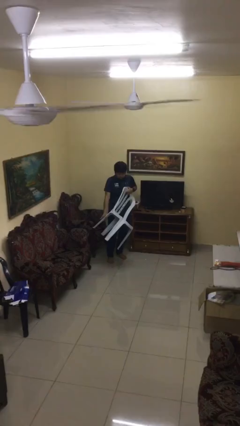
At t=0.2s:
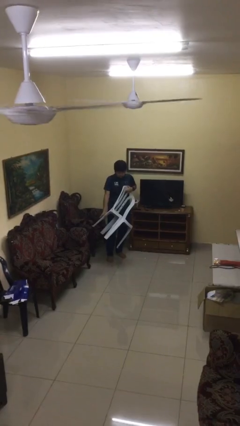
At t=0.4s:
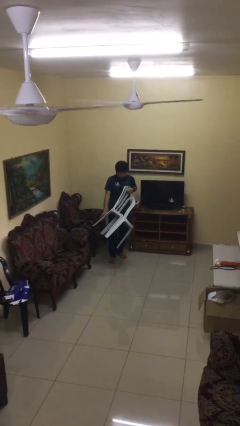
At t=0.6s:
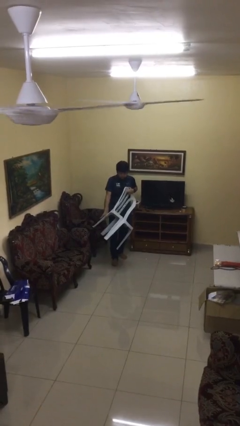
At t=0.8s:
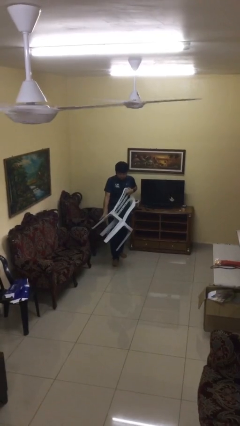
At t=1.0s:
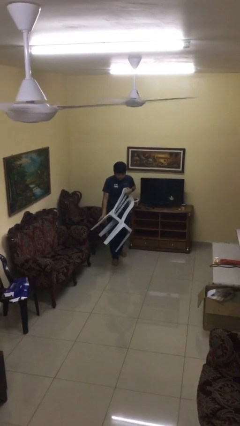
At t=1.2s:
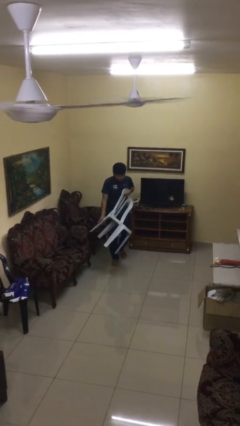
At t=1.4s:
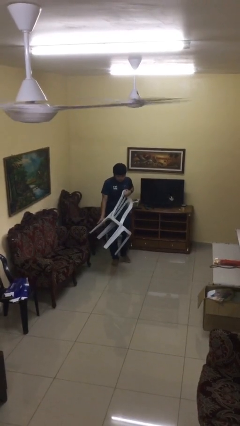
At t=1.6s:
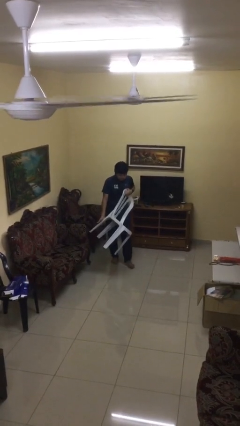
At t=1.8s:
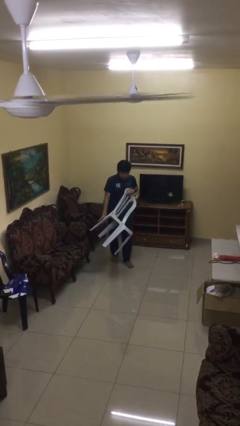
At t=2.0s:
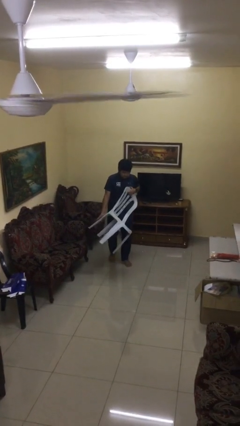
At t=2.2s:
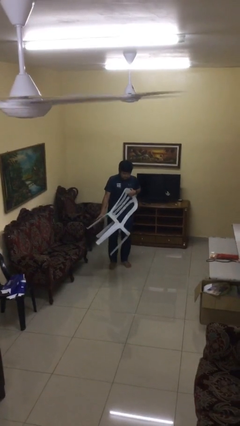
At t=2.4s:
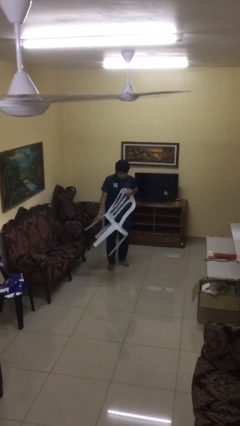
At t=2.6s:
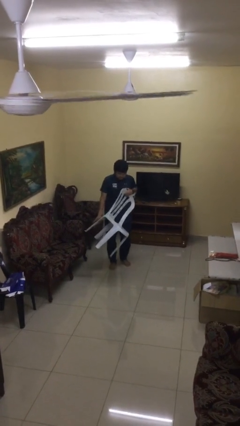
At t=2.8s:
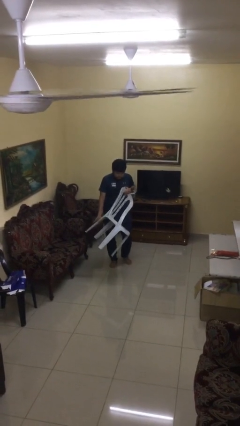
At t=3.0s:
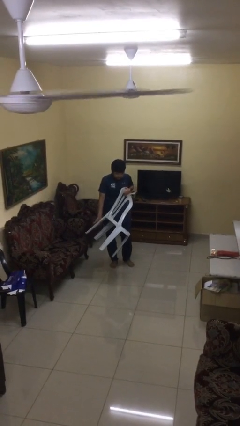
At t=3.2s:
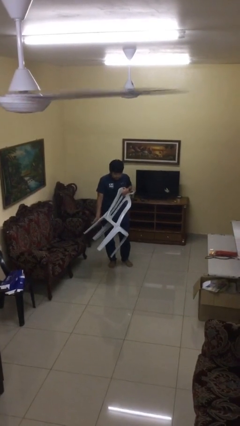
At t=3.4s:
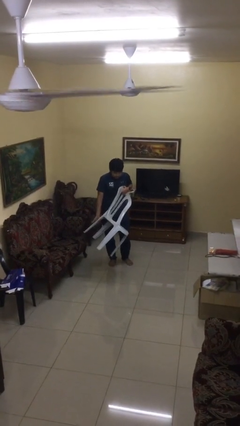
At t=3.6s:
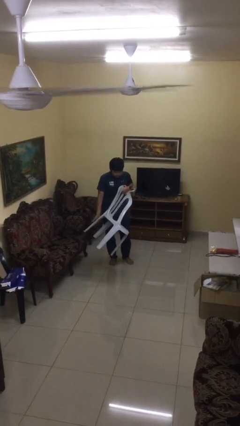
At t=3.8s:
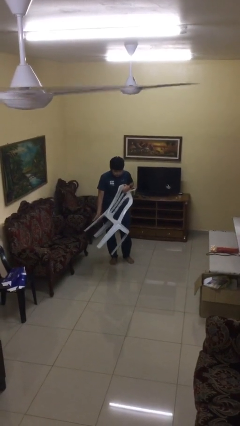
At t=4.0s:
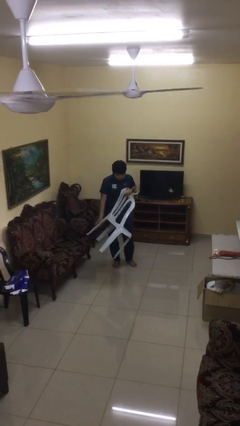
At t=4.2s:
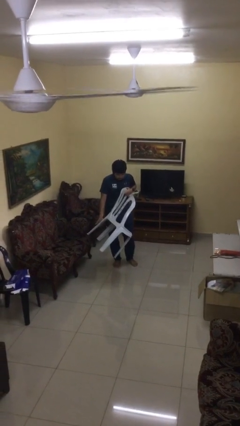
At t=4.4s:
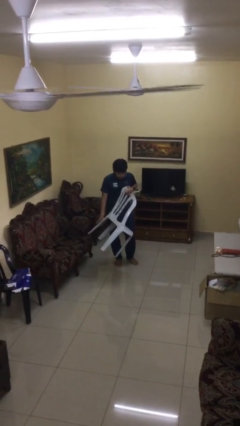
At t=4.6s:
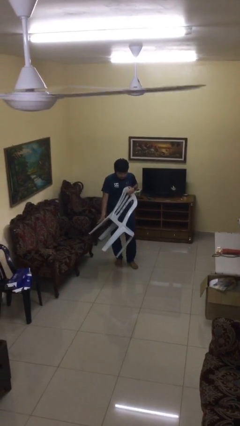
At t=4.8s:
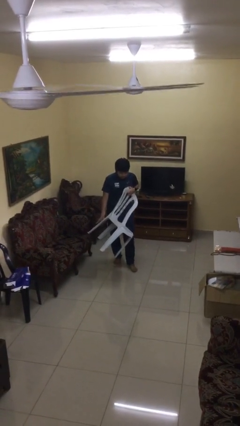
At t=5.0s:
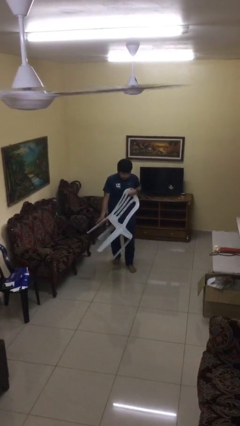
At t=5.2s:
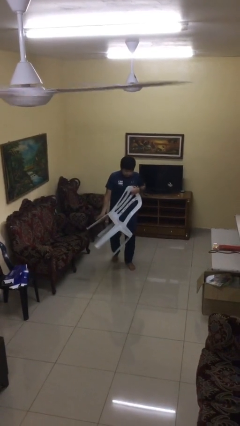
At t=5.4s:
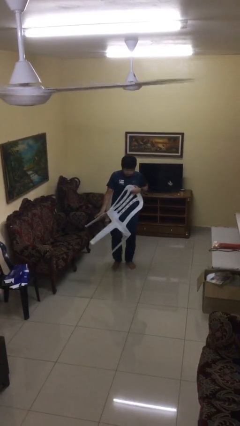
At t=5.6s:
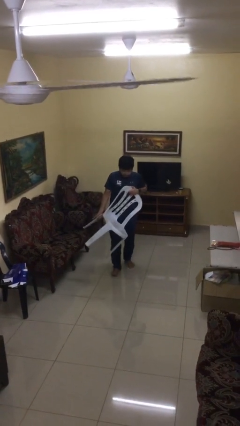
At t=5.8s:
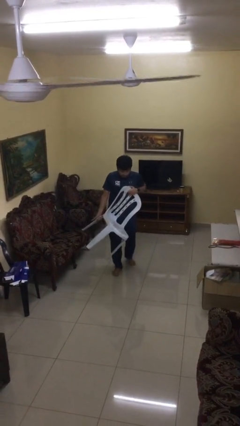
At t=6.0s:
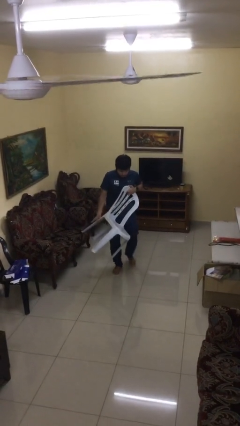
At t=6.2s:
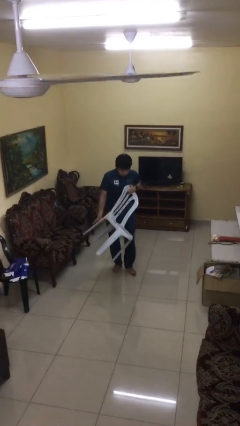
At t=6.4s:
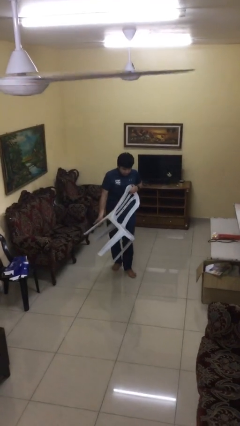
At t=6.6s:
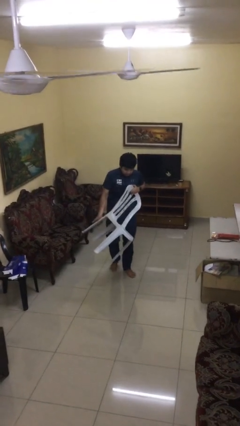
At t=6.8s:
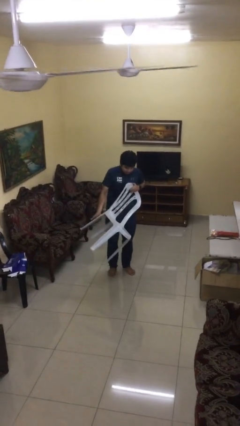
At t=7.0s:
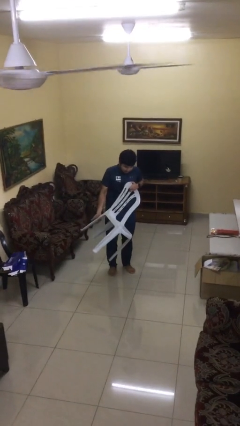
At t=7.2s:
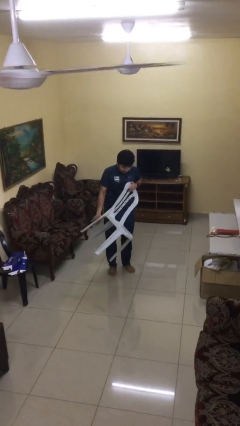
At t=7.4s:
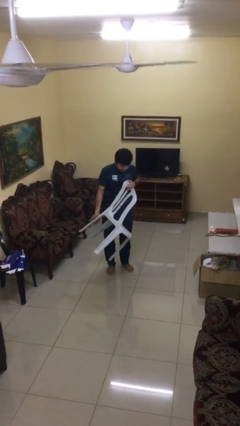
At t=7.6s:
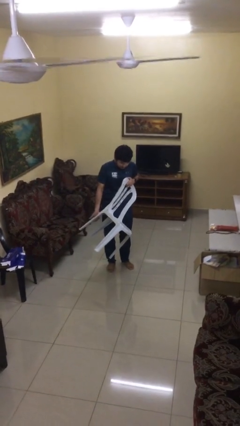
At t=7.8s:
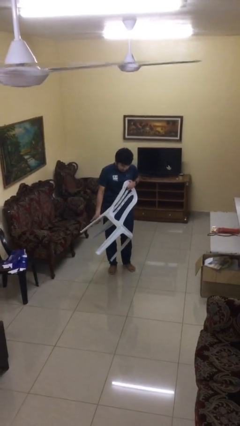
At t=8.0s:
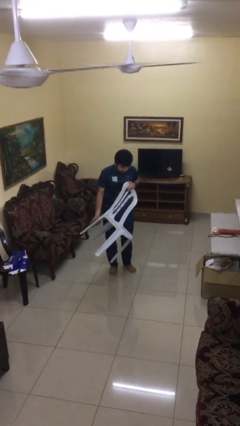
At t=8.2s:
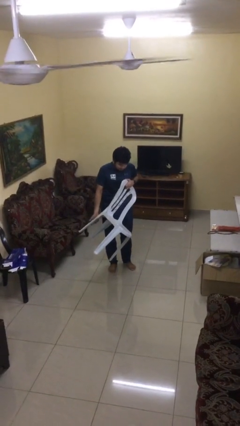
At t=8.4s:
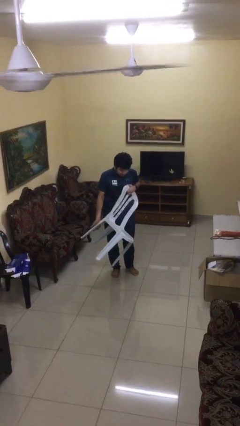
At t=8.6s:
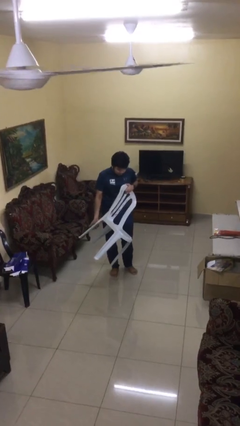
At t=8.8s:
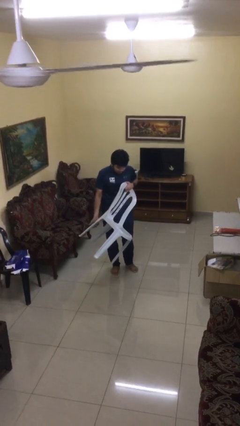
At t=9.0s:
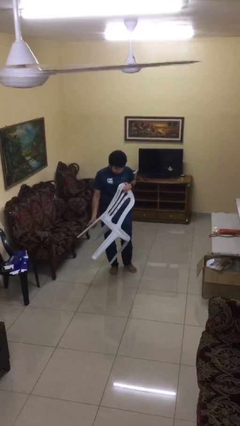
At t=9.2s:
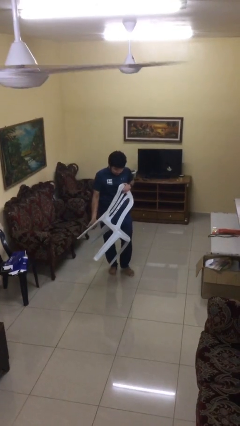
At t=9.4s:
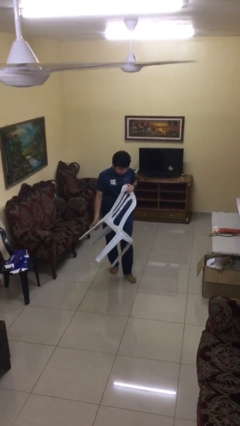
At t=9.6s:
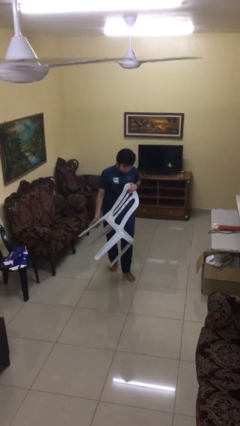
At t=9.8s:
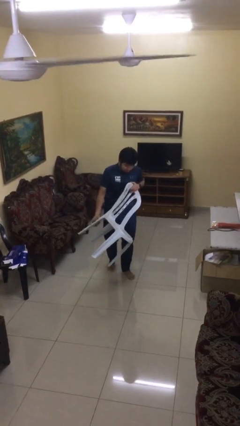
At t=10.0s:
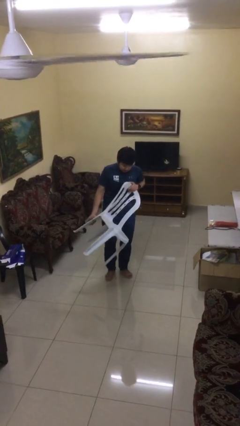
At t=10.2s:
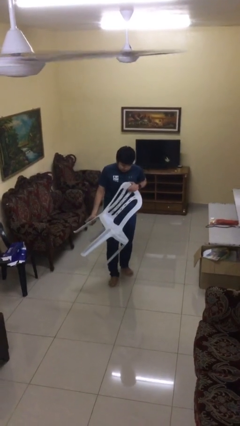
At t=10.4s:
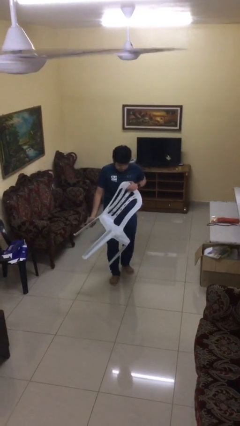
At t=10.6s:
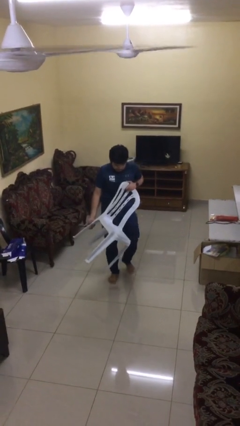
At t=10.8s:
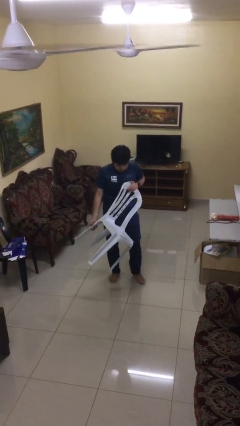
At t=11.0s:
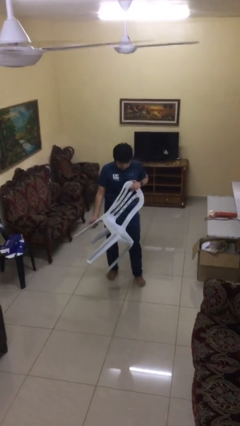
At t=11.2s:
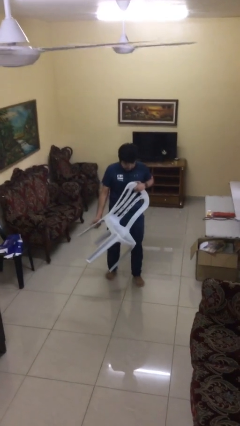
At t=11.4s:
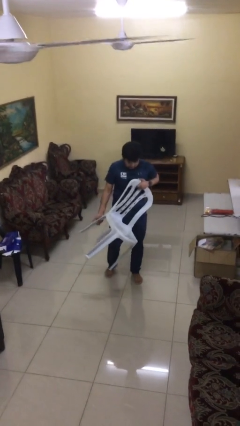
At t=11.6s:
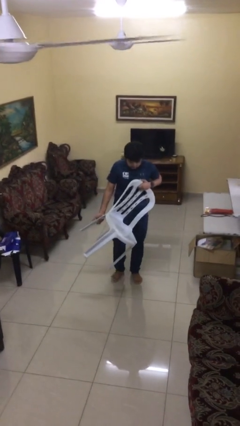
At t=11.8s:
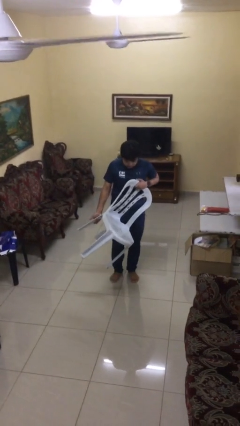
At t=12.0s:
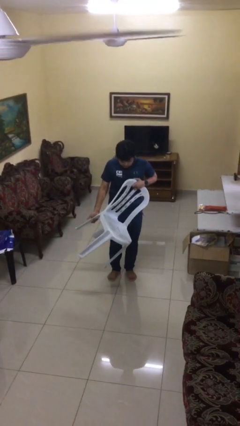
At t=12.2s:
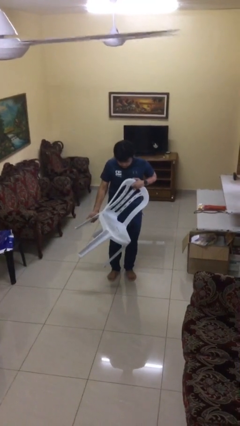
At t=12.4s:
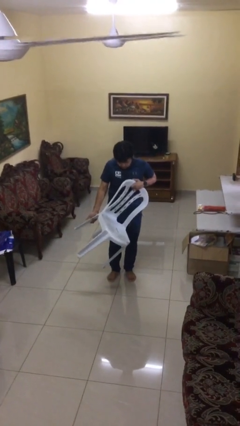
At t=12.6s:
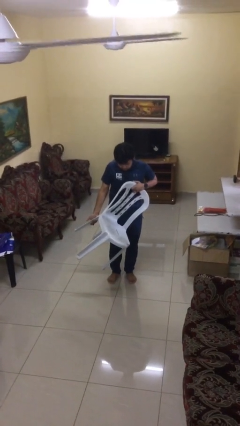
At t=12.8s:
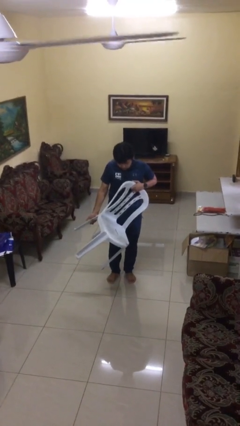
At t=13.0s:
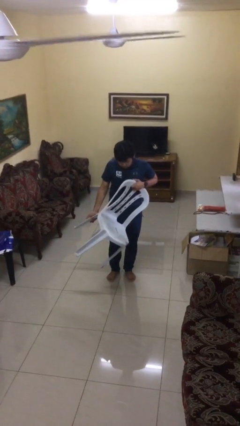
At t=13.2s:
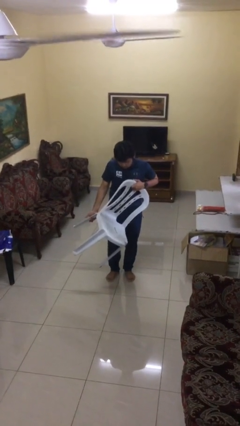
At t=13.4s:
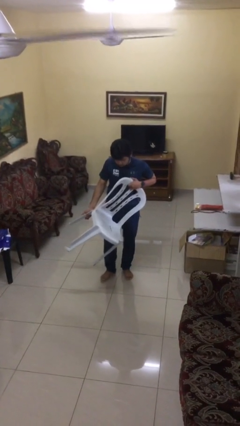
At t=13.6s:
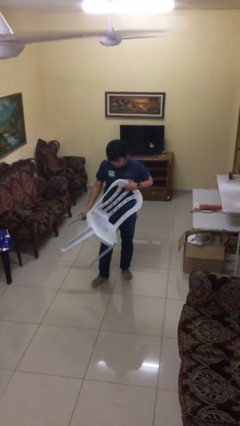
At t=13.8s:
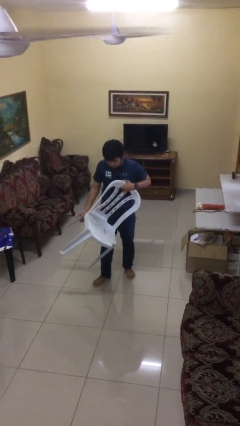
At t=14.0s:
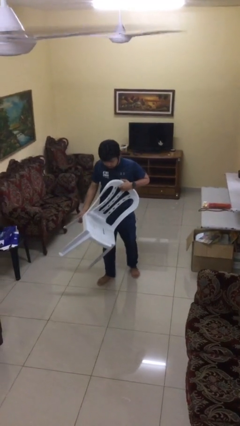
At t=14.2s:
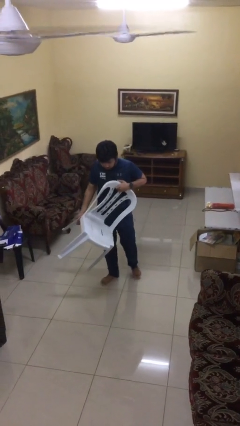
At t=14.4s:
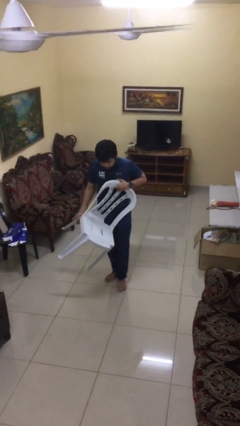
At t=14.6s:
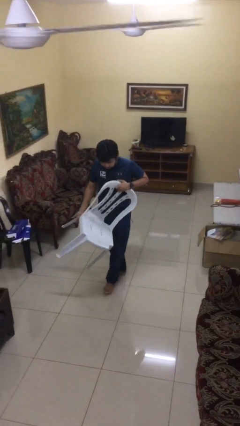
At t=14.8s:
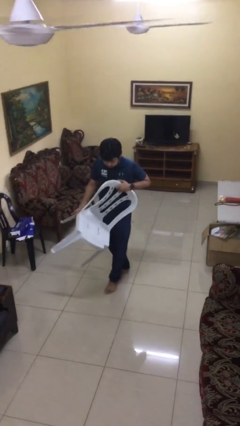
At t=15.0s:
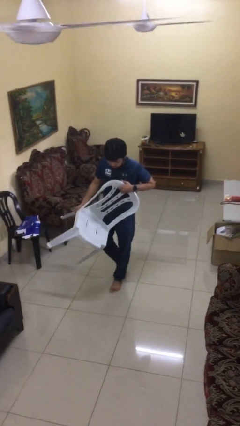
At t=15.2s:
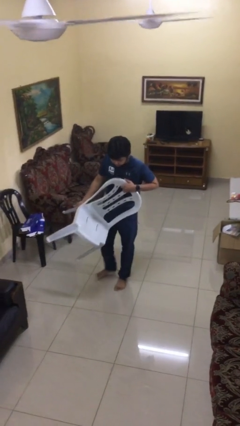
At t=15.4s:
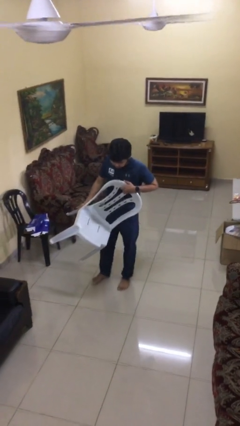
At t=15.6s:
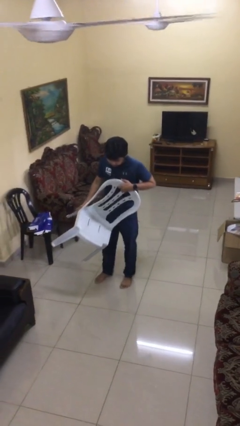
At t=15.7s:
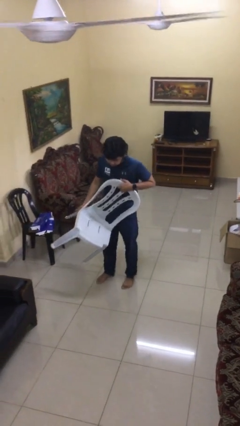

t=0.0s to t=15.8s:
person carries furniture

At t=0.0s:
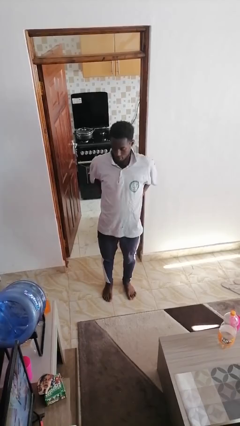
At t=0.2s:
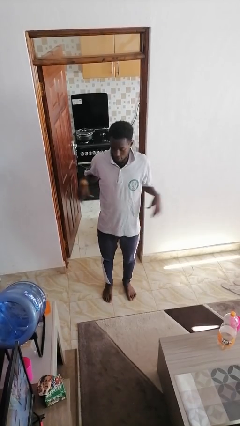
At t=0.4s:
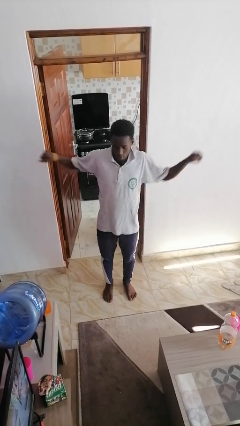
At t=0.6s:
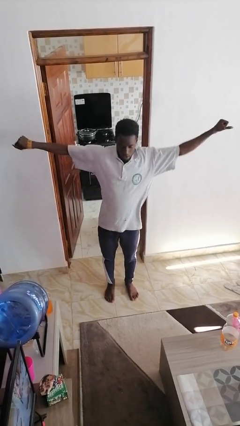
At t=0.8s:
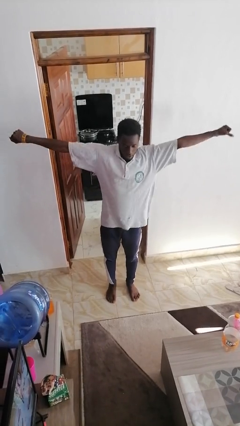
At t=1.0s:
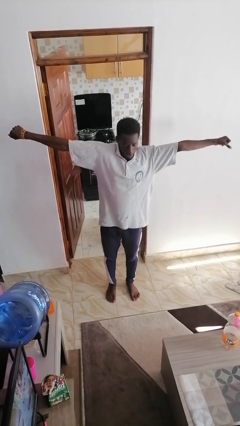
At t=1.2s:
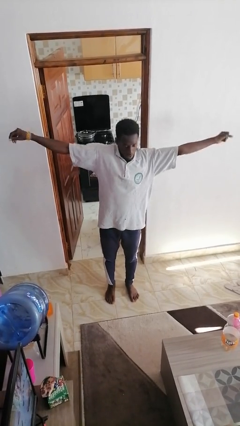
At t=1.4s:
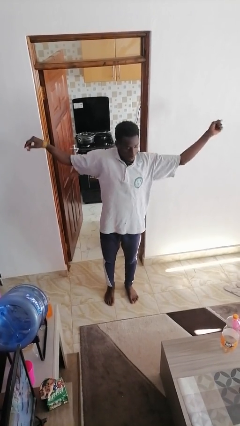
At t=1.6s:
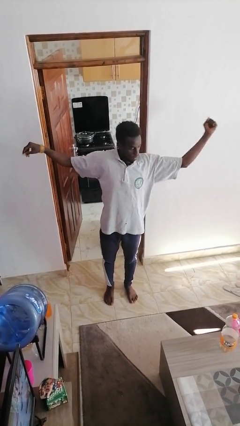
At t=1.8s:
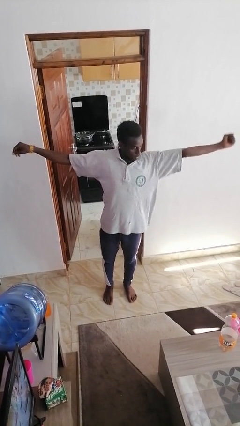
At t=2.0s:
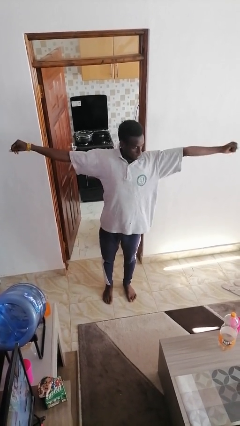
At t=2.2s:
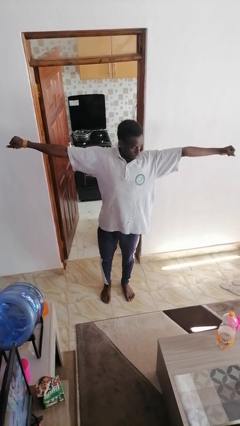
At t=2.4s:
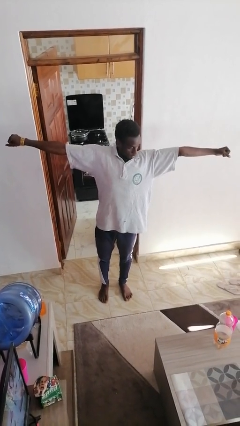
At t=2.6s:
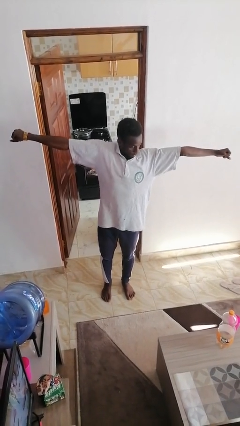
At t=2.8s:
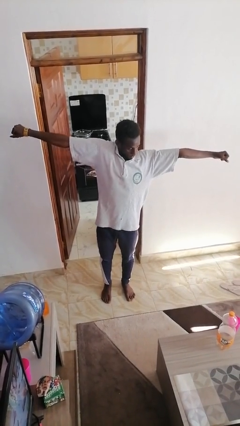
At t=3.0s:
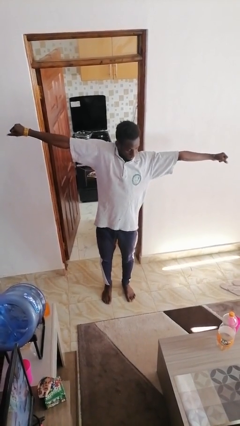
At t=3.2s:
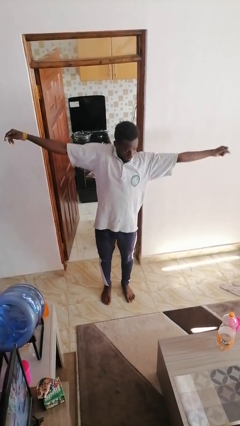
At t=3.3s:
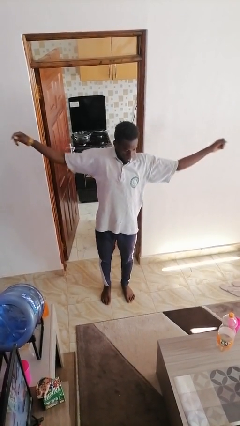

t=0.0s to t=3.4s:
person stretches arms to side
